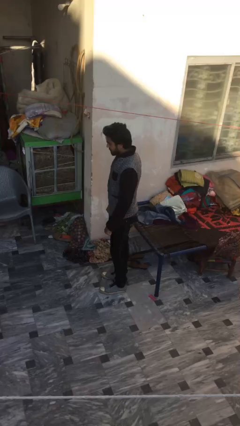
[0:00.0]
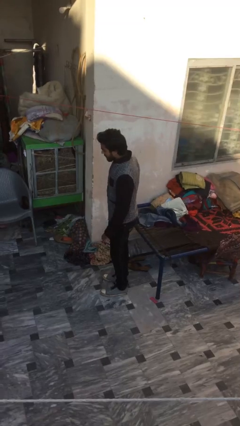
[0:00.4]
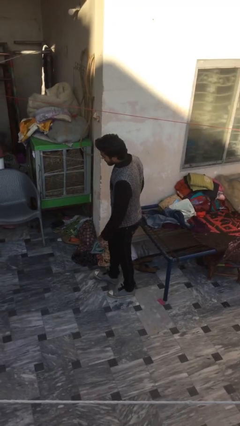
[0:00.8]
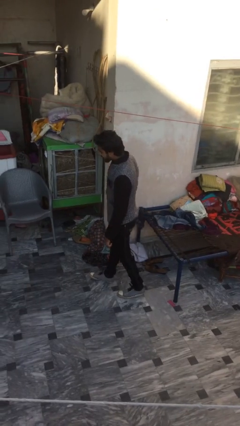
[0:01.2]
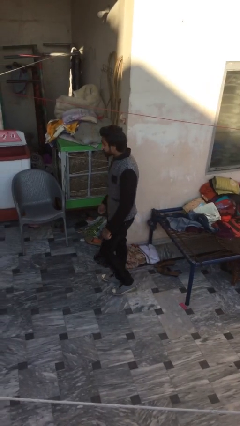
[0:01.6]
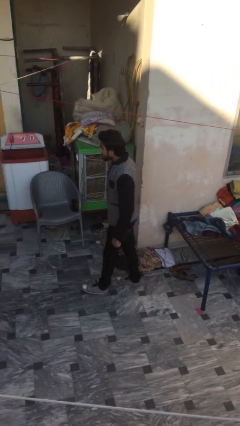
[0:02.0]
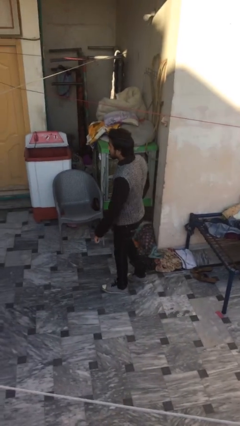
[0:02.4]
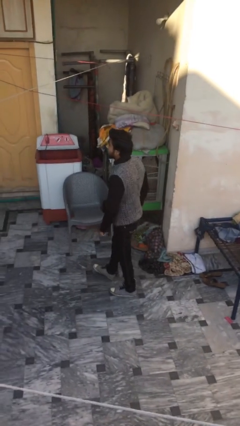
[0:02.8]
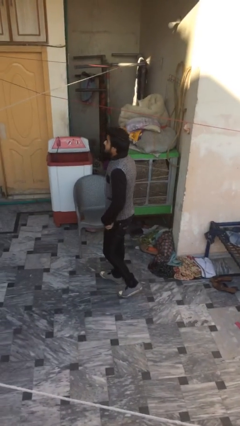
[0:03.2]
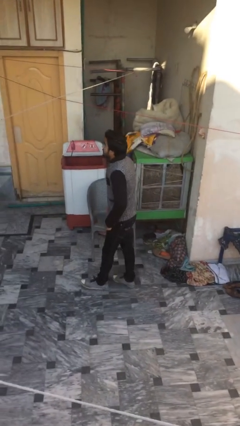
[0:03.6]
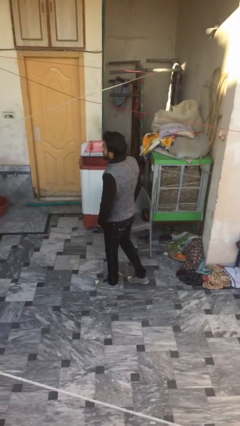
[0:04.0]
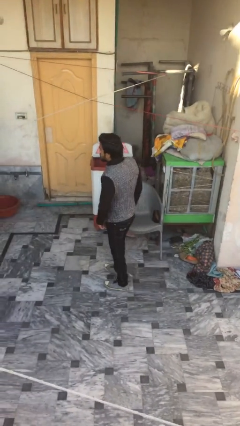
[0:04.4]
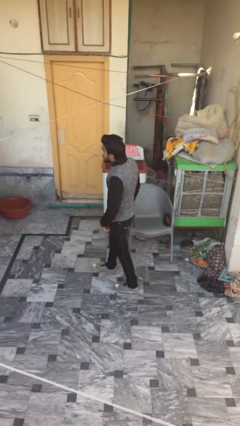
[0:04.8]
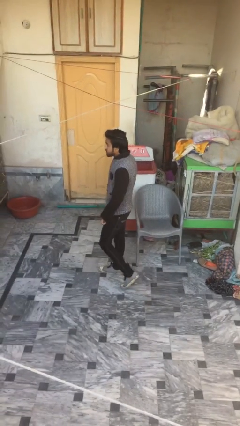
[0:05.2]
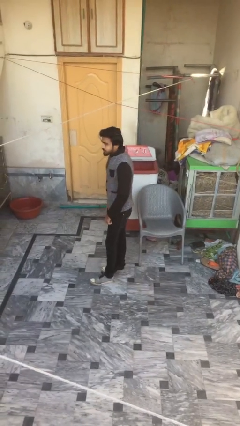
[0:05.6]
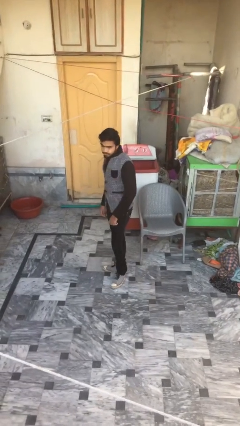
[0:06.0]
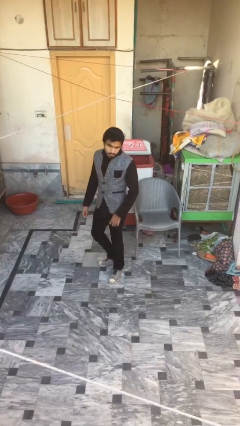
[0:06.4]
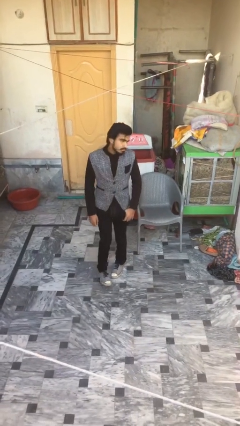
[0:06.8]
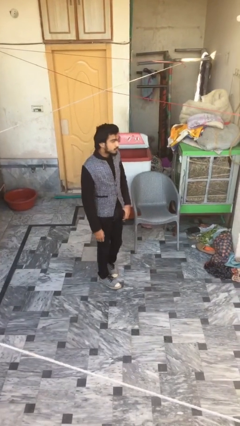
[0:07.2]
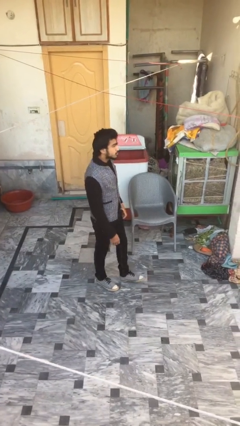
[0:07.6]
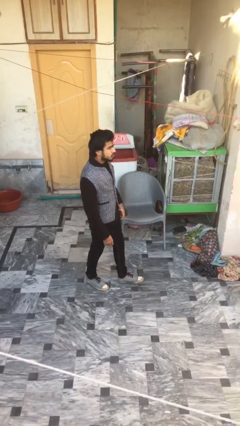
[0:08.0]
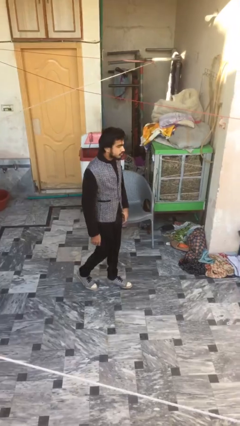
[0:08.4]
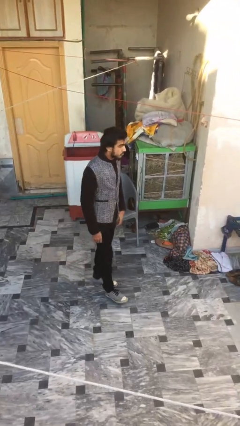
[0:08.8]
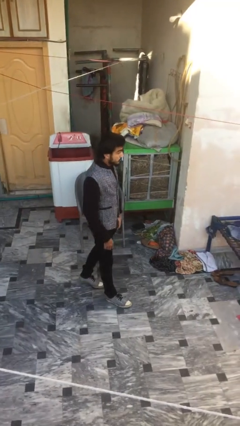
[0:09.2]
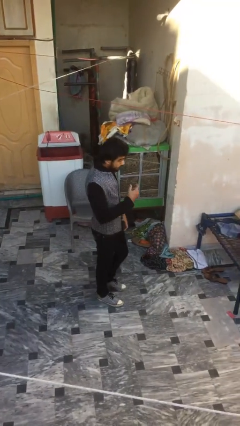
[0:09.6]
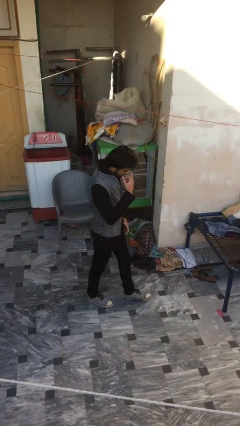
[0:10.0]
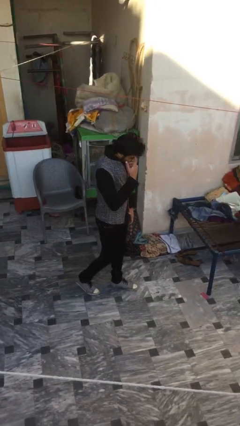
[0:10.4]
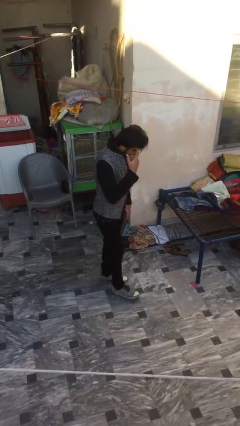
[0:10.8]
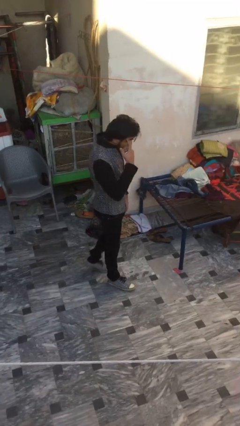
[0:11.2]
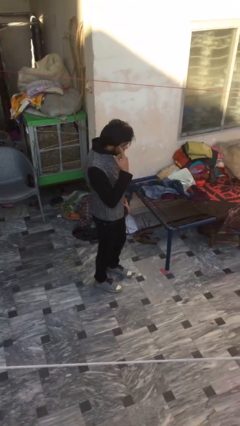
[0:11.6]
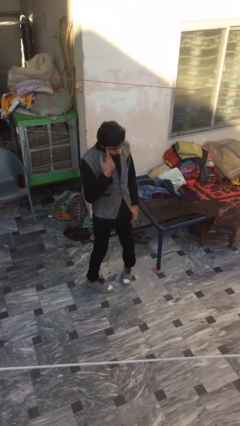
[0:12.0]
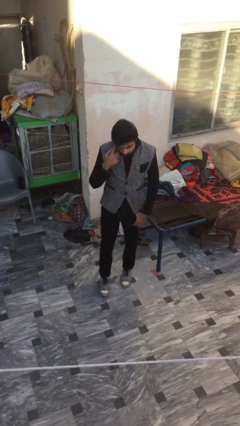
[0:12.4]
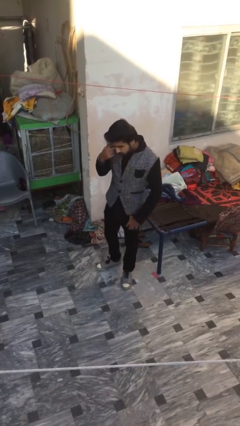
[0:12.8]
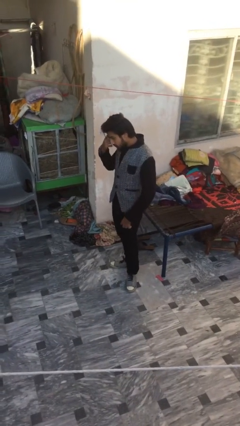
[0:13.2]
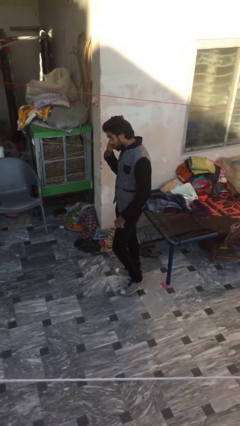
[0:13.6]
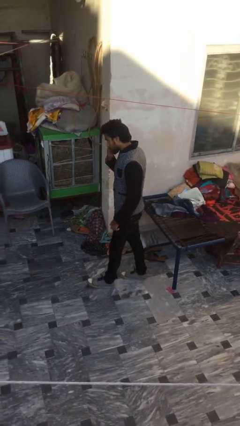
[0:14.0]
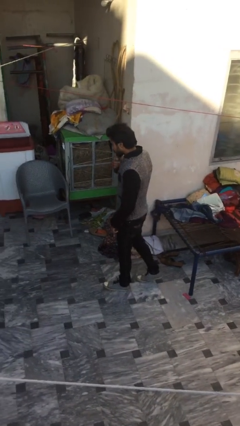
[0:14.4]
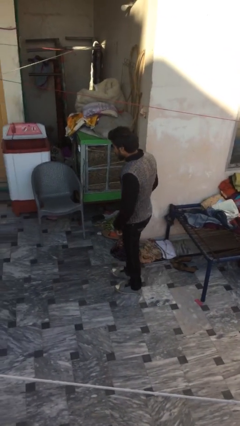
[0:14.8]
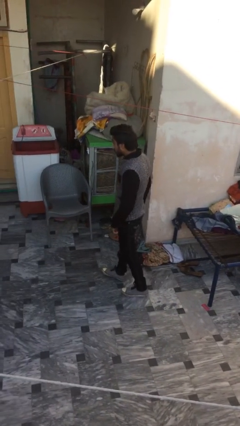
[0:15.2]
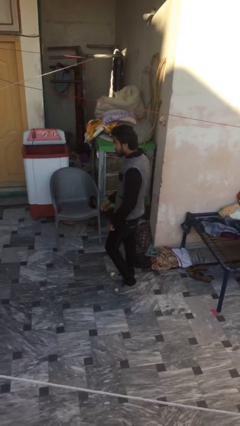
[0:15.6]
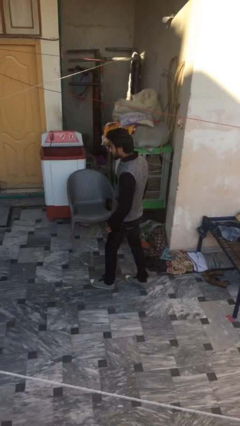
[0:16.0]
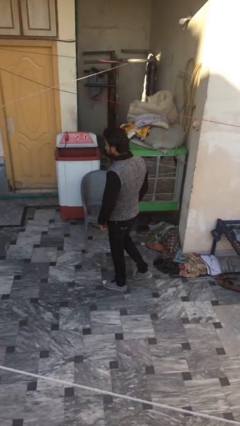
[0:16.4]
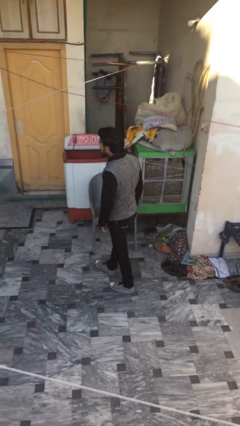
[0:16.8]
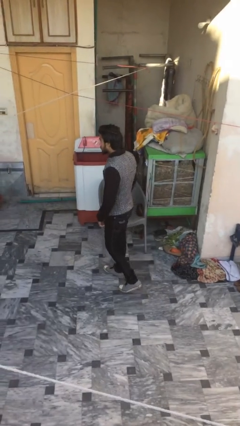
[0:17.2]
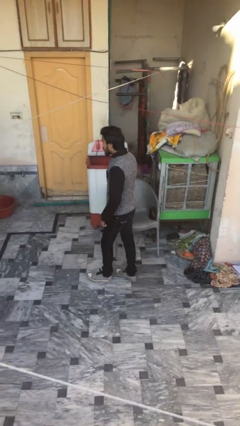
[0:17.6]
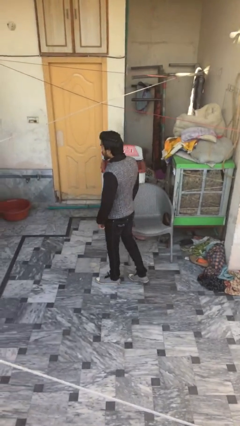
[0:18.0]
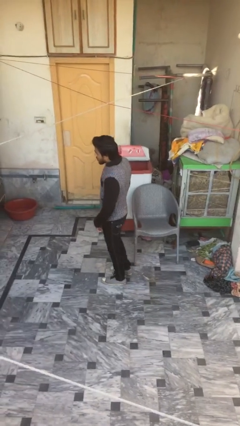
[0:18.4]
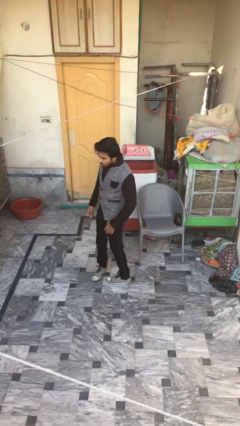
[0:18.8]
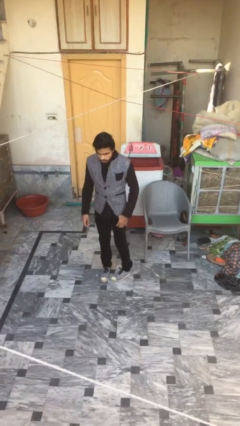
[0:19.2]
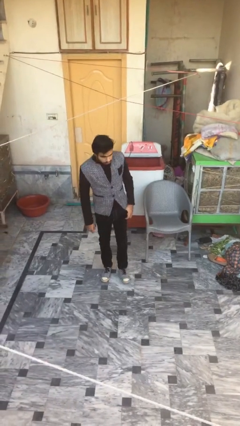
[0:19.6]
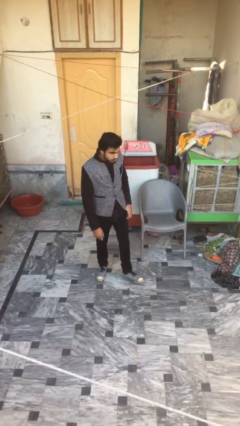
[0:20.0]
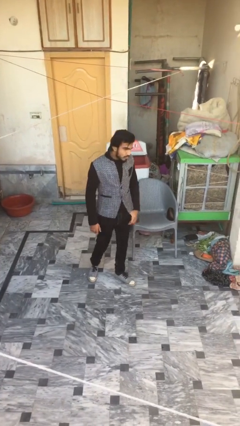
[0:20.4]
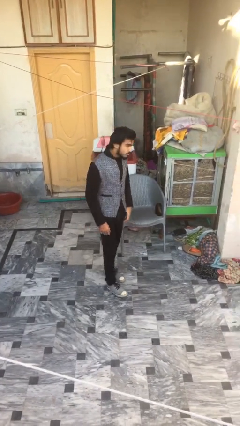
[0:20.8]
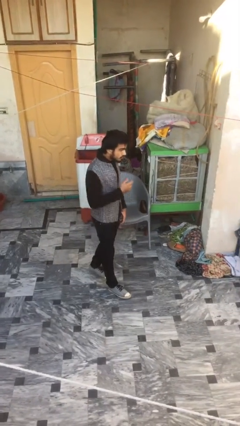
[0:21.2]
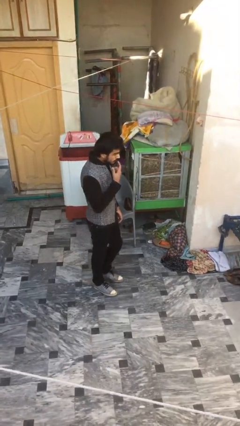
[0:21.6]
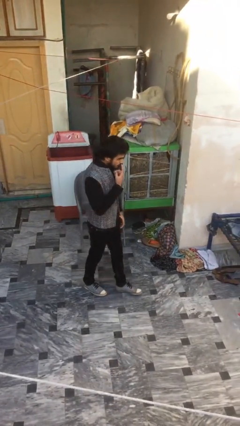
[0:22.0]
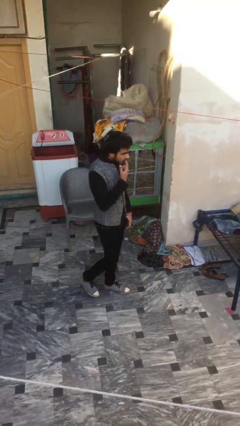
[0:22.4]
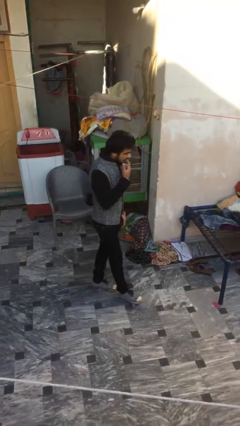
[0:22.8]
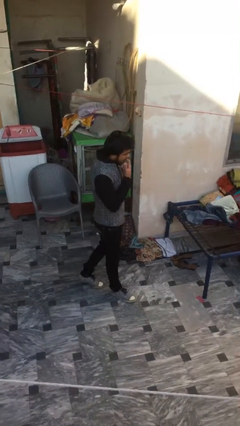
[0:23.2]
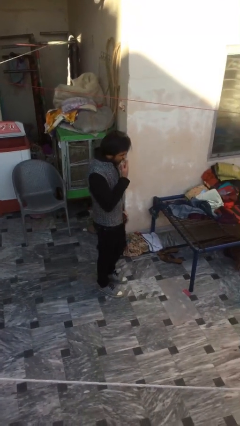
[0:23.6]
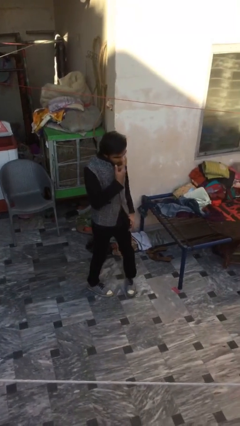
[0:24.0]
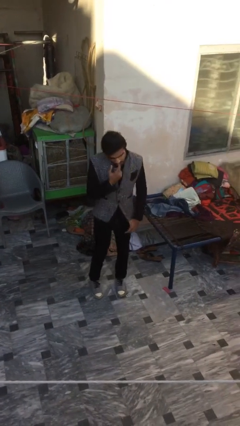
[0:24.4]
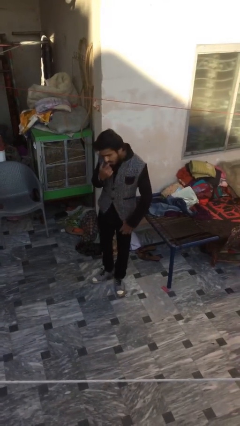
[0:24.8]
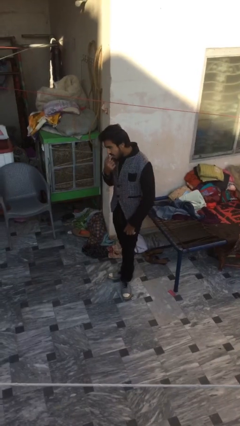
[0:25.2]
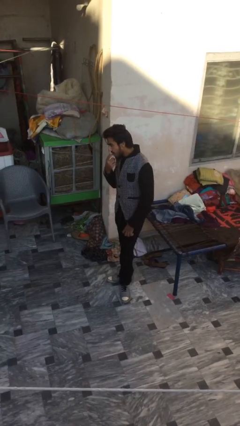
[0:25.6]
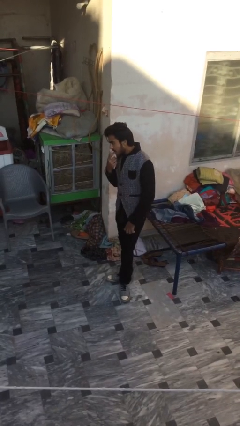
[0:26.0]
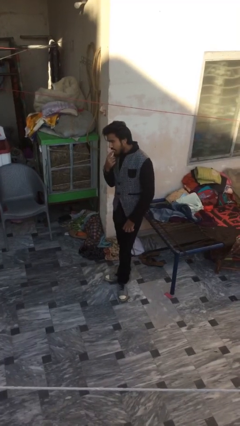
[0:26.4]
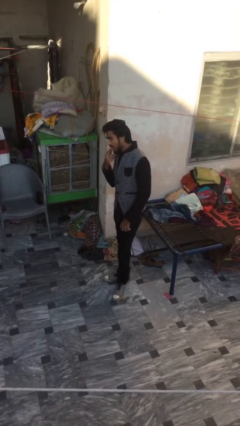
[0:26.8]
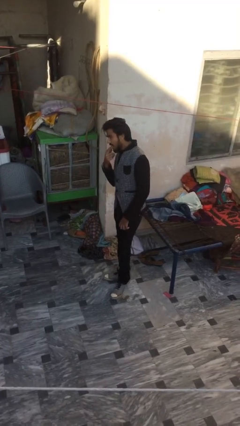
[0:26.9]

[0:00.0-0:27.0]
person walks

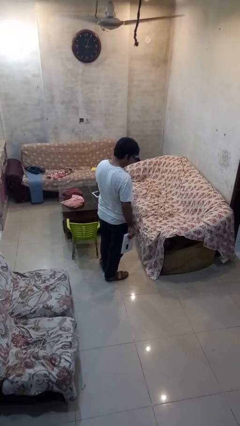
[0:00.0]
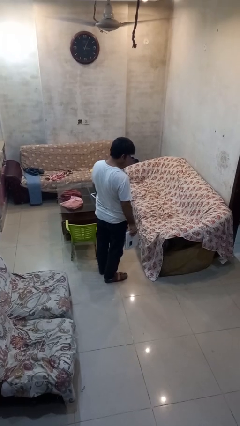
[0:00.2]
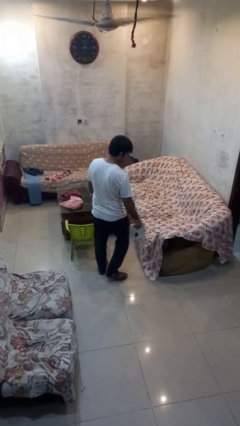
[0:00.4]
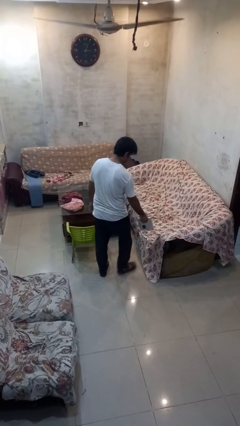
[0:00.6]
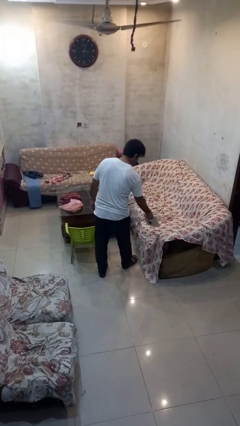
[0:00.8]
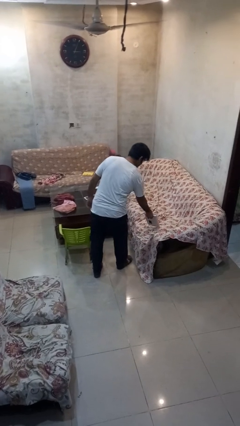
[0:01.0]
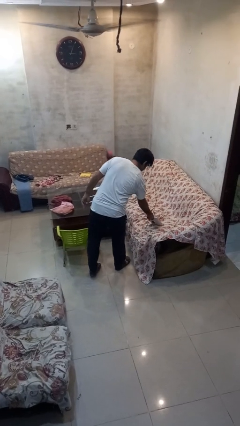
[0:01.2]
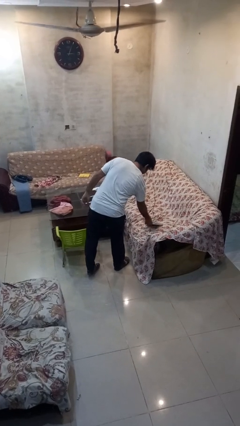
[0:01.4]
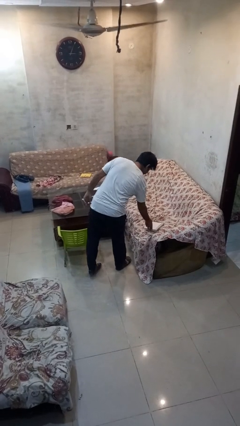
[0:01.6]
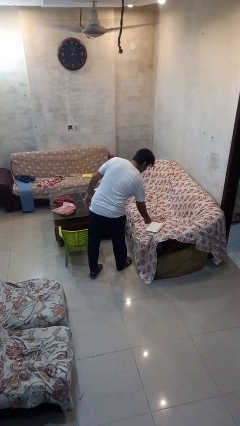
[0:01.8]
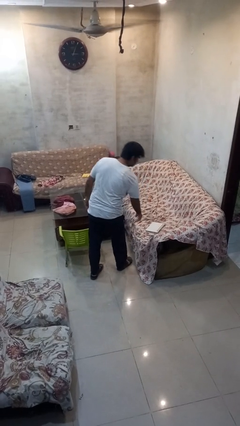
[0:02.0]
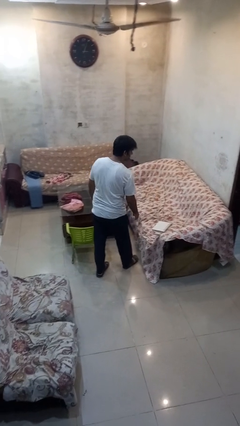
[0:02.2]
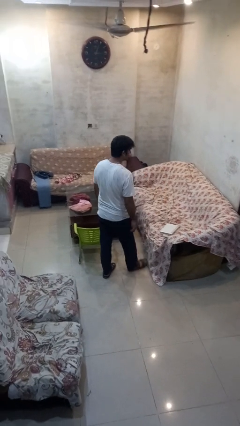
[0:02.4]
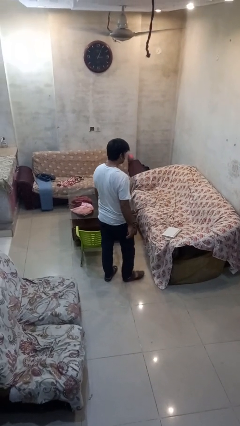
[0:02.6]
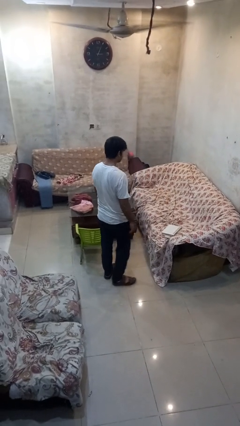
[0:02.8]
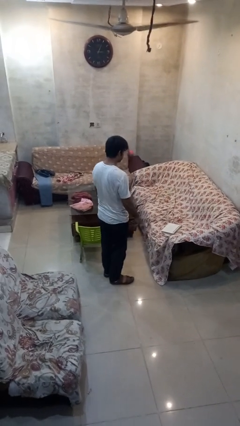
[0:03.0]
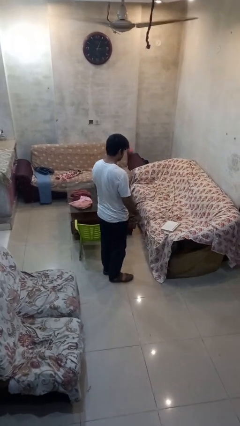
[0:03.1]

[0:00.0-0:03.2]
person puts down object on couch

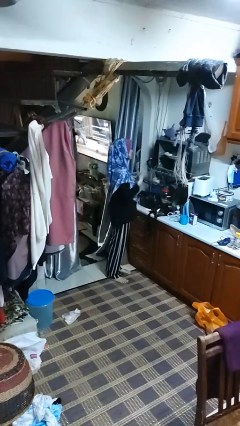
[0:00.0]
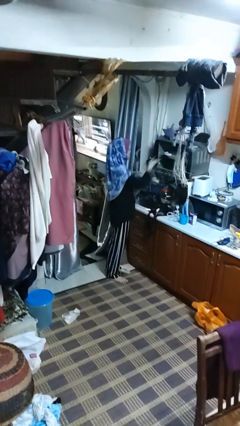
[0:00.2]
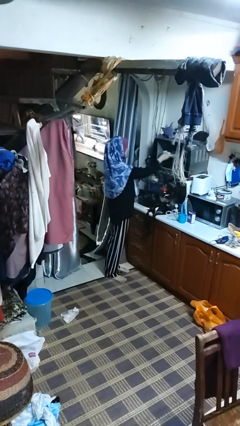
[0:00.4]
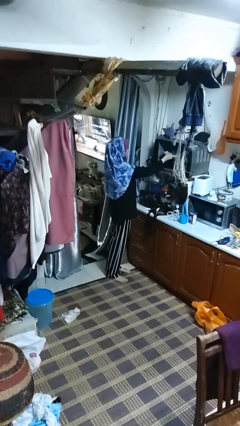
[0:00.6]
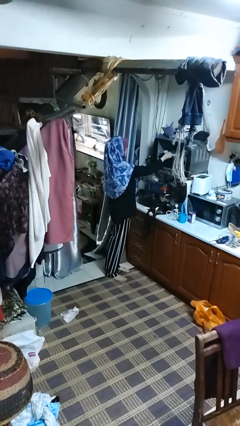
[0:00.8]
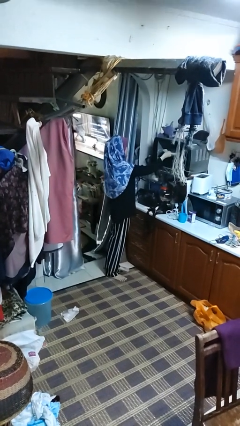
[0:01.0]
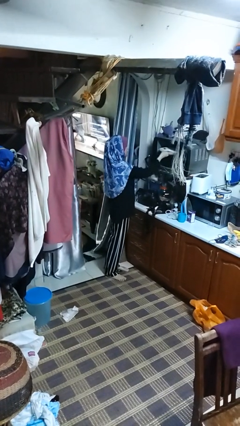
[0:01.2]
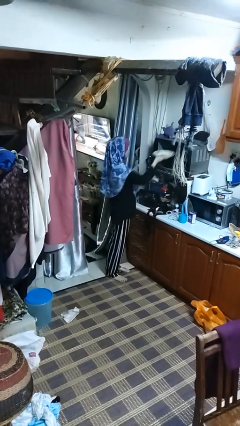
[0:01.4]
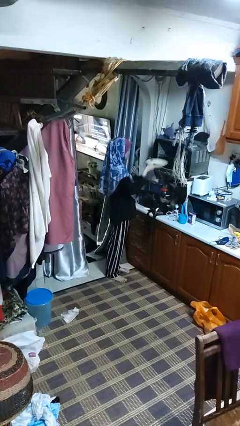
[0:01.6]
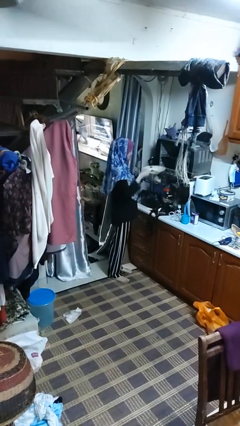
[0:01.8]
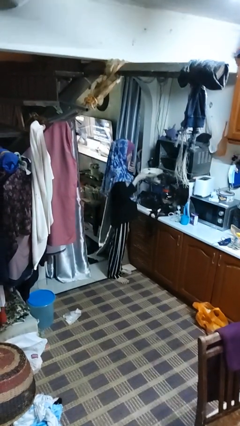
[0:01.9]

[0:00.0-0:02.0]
person takes object from oven
